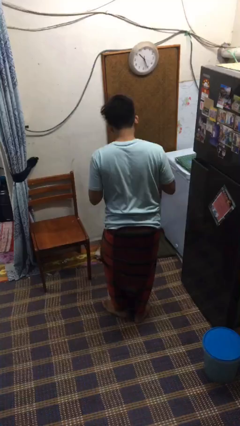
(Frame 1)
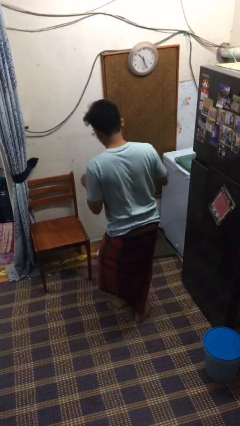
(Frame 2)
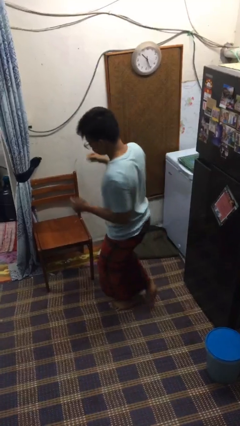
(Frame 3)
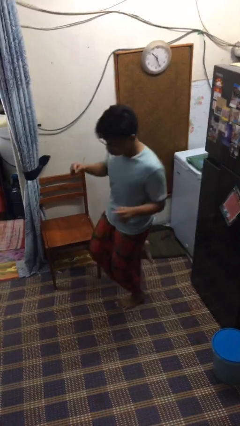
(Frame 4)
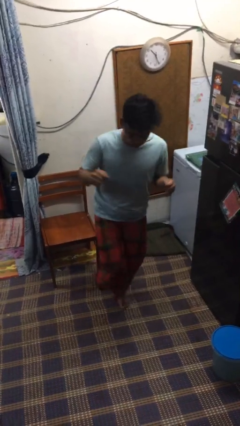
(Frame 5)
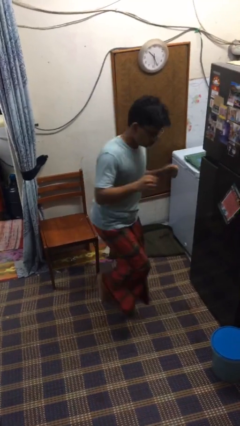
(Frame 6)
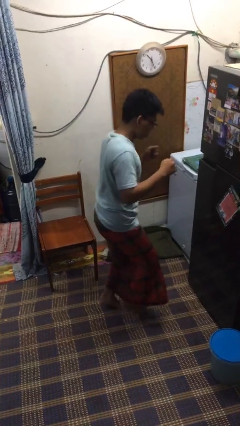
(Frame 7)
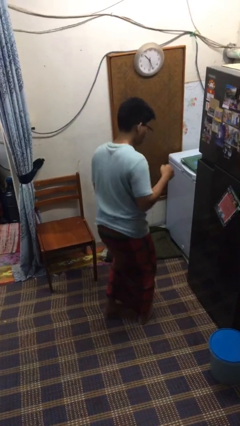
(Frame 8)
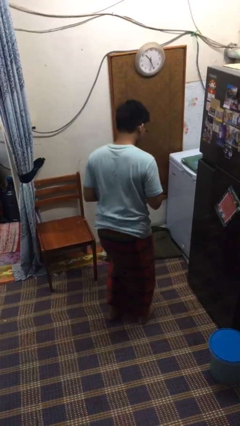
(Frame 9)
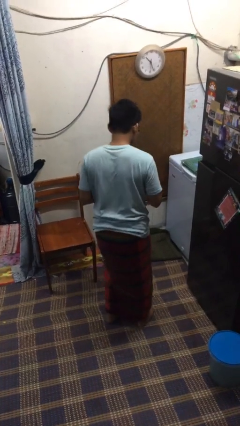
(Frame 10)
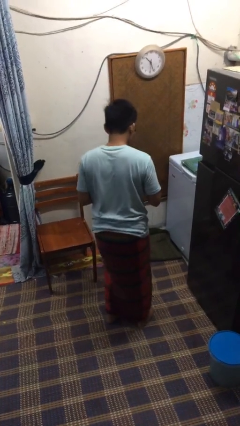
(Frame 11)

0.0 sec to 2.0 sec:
person twirls

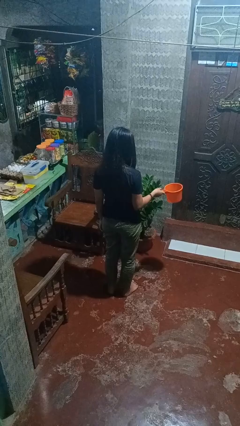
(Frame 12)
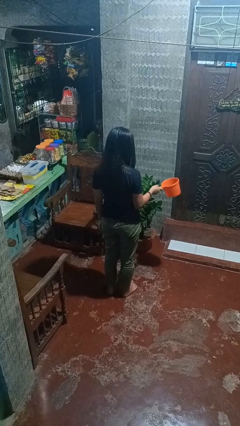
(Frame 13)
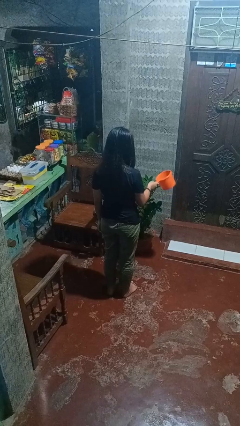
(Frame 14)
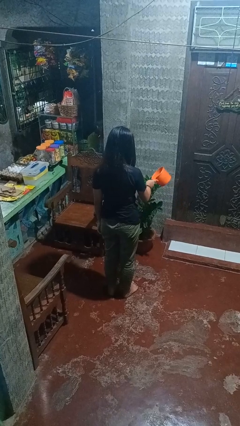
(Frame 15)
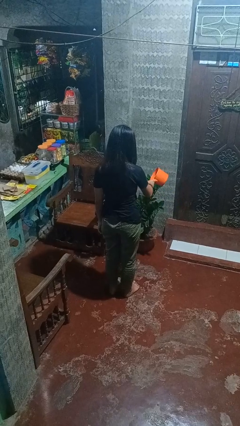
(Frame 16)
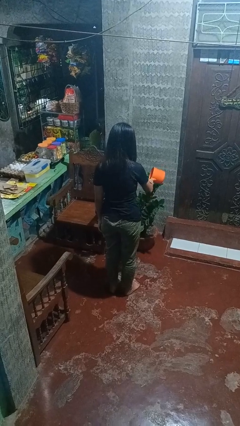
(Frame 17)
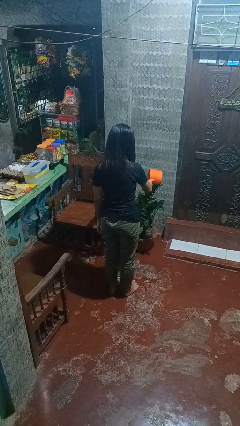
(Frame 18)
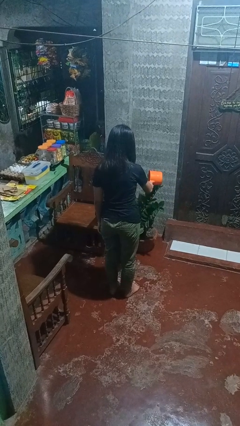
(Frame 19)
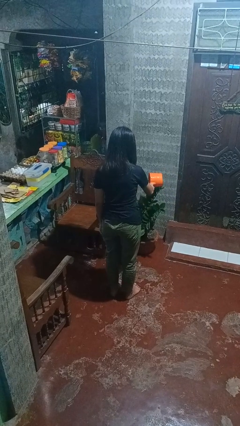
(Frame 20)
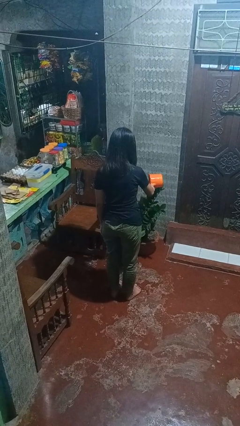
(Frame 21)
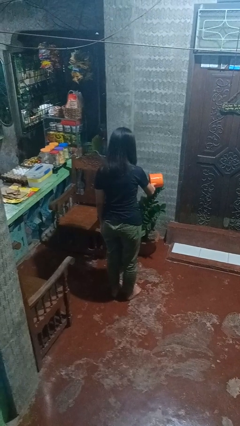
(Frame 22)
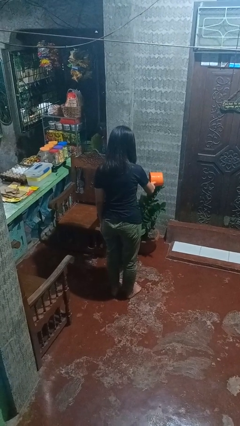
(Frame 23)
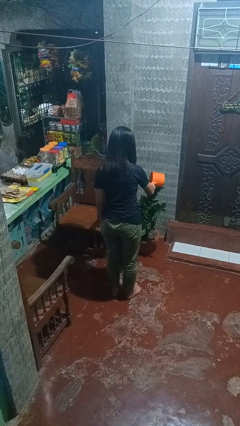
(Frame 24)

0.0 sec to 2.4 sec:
person waters houseplant

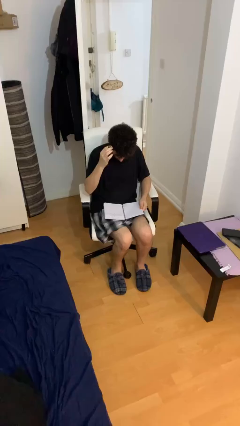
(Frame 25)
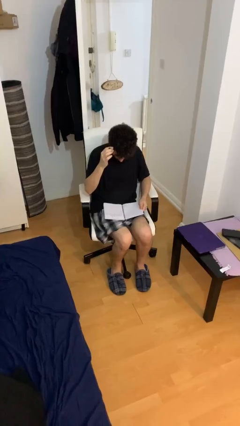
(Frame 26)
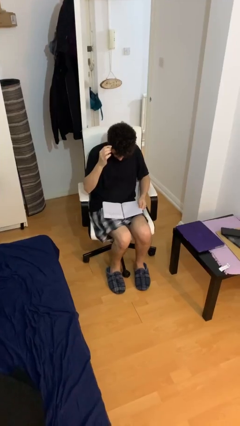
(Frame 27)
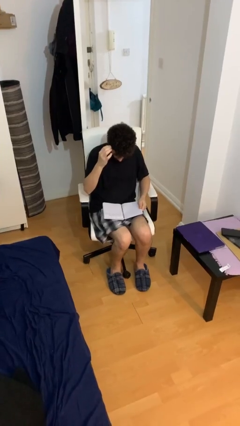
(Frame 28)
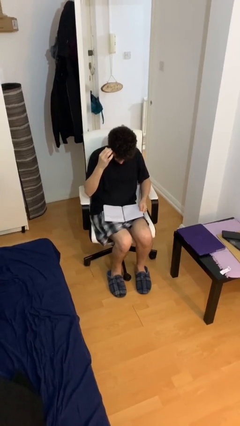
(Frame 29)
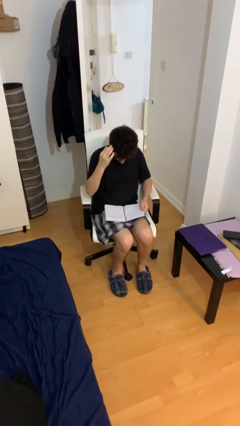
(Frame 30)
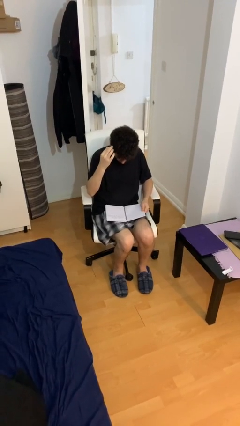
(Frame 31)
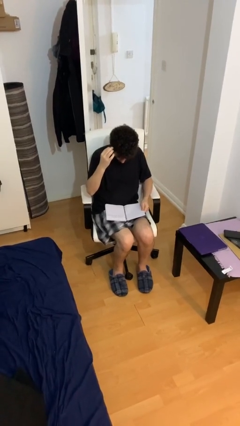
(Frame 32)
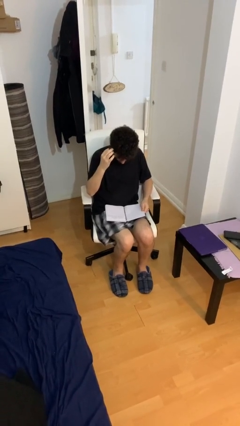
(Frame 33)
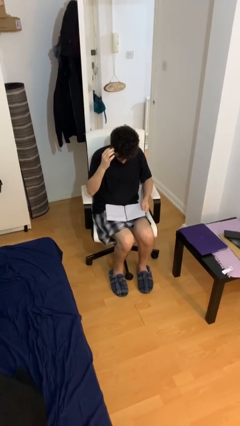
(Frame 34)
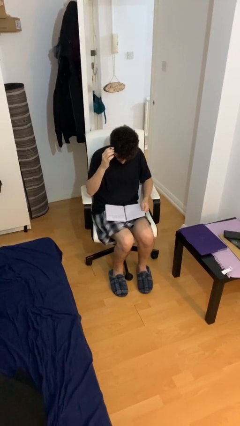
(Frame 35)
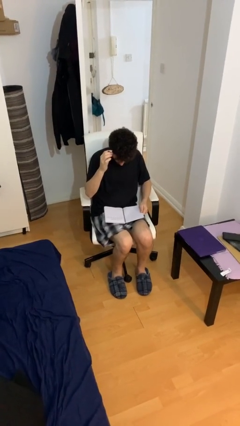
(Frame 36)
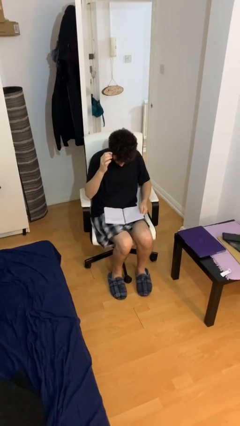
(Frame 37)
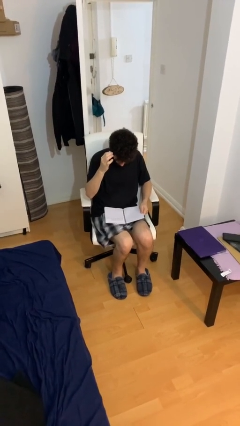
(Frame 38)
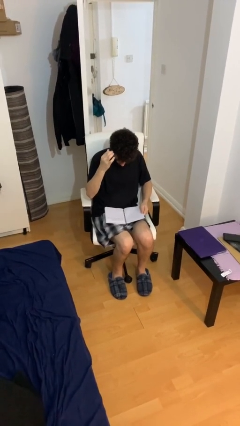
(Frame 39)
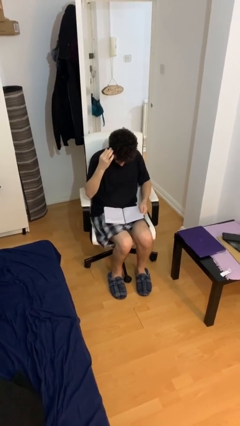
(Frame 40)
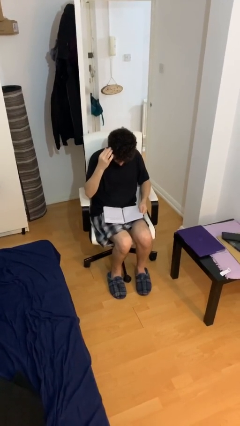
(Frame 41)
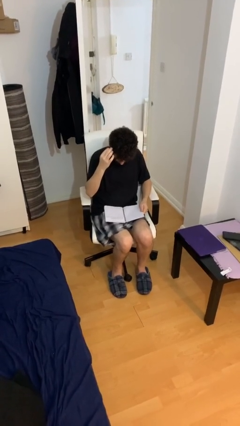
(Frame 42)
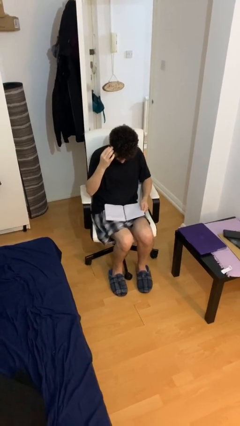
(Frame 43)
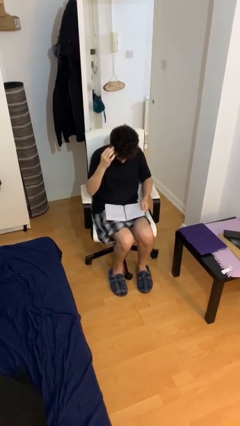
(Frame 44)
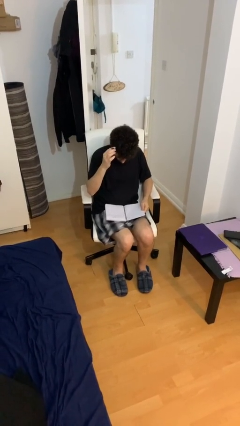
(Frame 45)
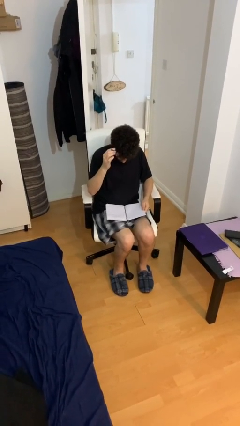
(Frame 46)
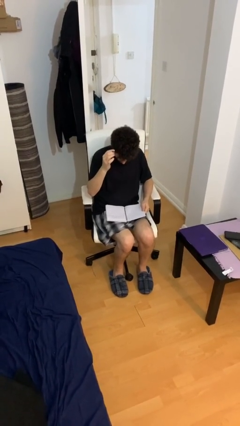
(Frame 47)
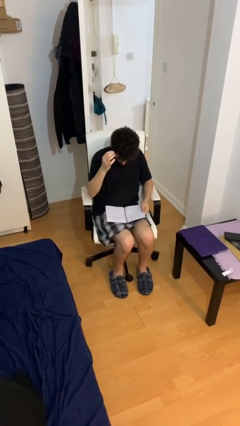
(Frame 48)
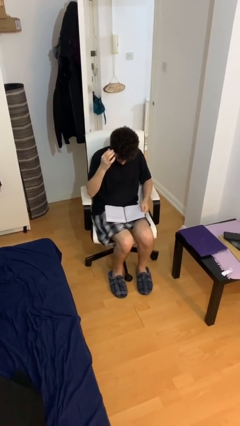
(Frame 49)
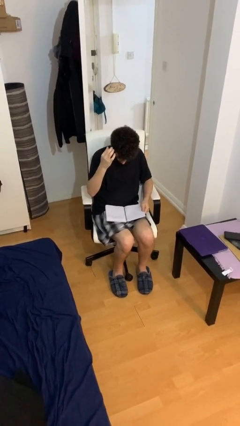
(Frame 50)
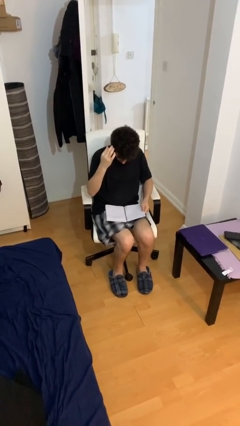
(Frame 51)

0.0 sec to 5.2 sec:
person reads document

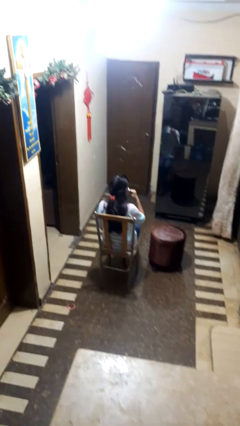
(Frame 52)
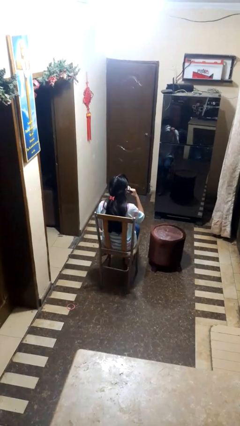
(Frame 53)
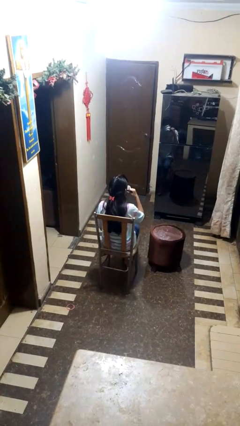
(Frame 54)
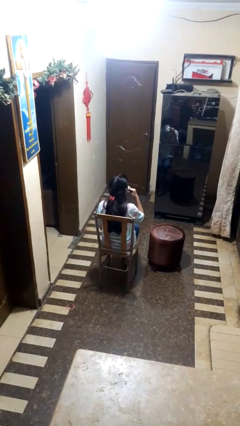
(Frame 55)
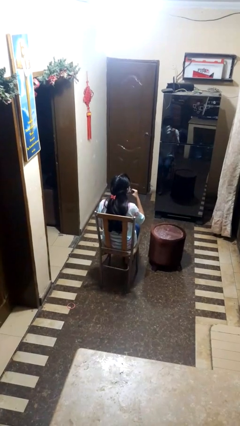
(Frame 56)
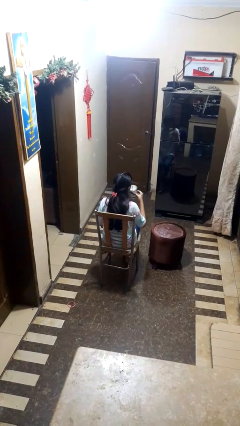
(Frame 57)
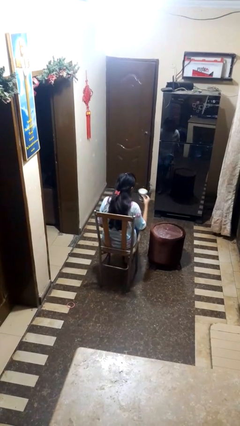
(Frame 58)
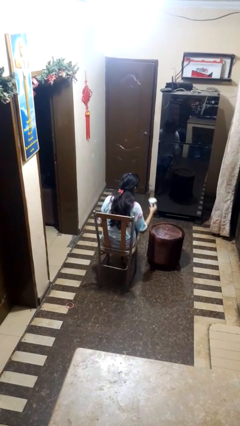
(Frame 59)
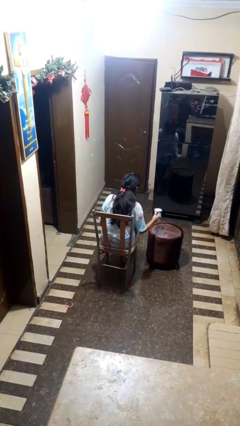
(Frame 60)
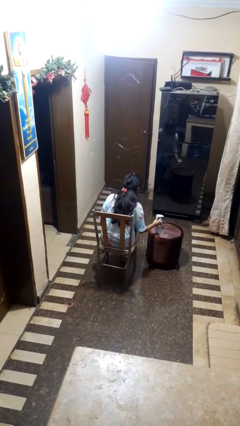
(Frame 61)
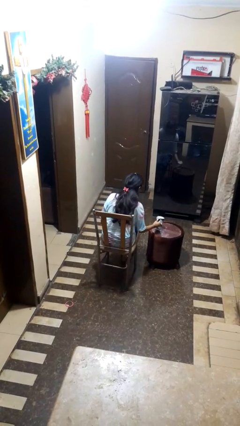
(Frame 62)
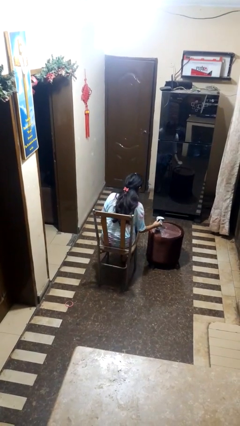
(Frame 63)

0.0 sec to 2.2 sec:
person puts down object on table

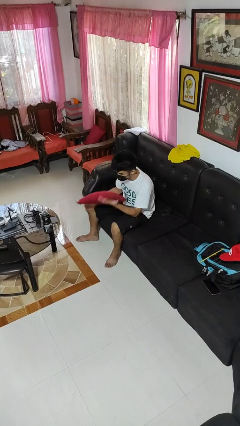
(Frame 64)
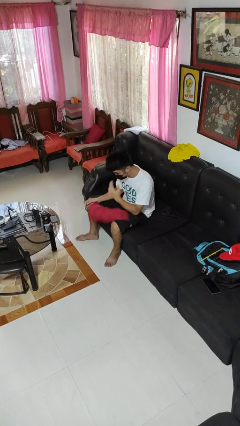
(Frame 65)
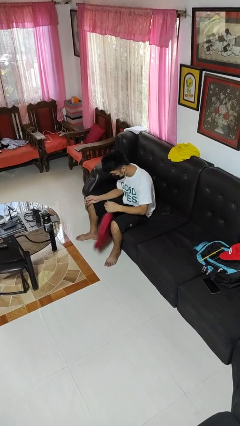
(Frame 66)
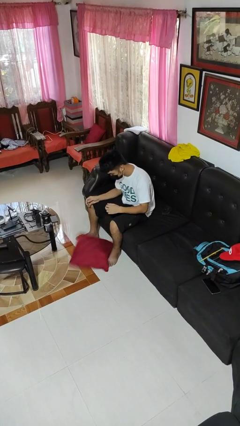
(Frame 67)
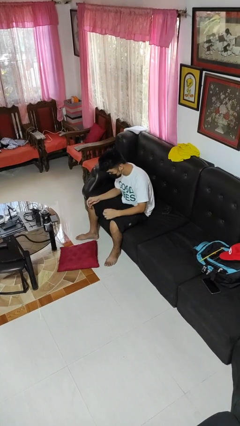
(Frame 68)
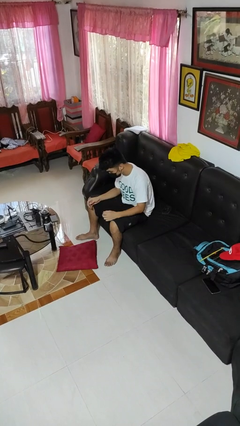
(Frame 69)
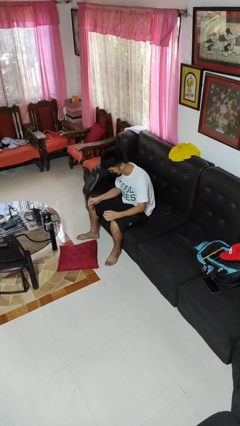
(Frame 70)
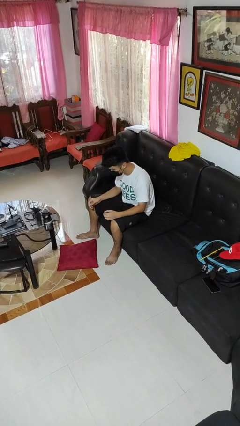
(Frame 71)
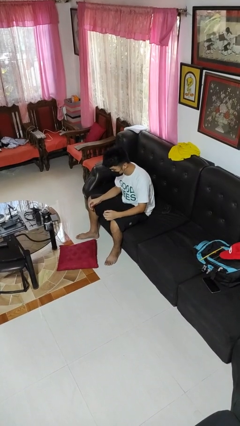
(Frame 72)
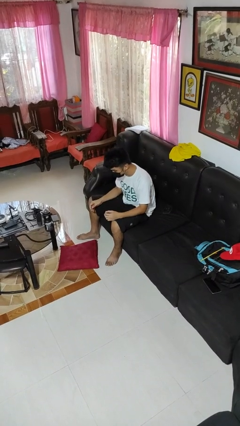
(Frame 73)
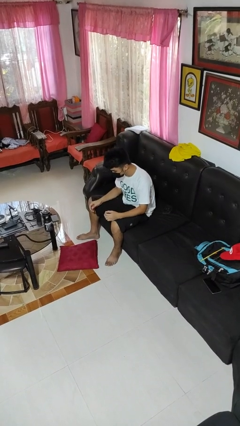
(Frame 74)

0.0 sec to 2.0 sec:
person drops object

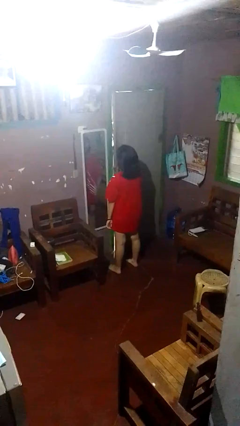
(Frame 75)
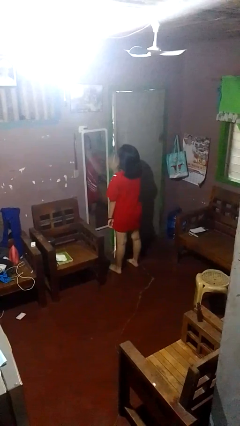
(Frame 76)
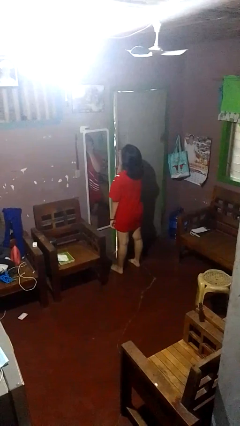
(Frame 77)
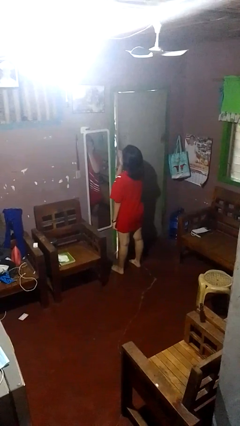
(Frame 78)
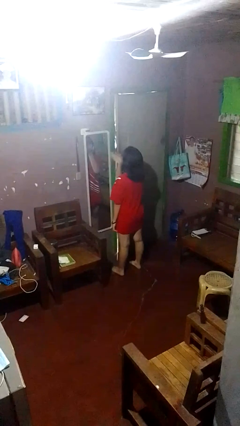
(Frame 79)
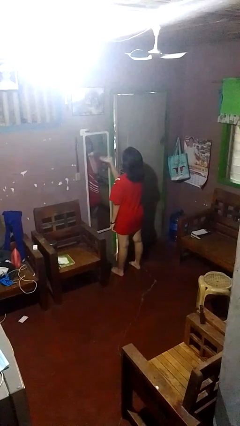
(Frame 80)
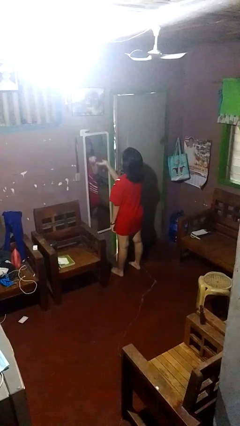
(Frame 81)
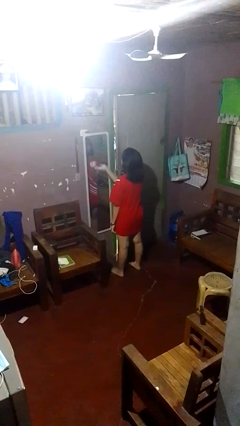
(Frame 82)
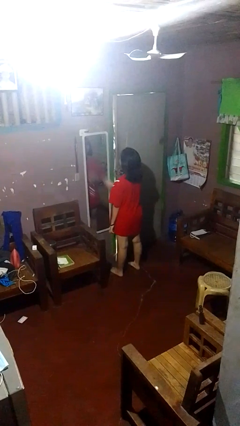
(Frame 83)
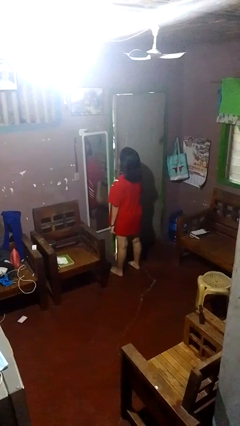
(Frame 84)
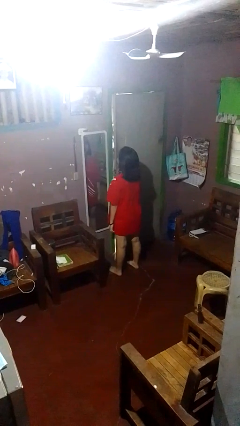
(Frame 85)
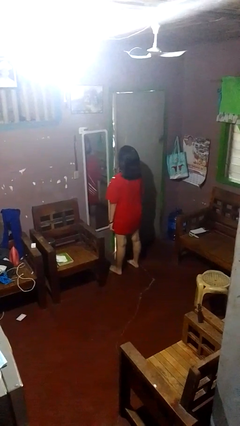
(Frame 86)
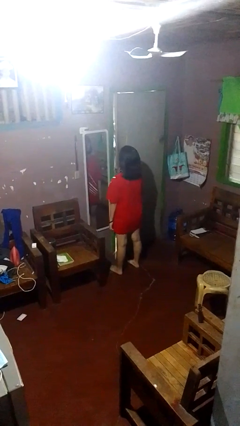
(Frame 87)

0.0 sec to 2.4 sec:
person gestures blow kiss

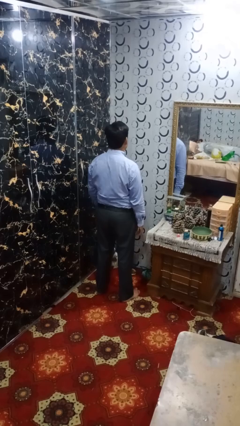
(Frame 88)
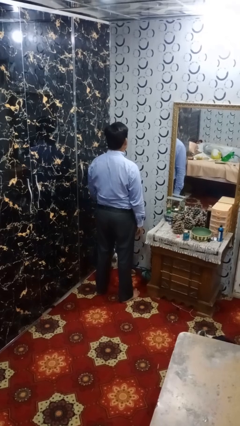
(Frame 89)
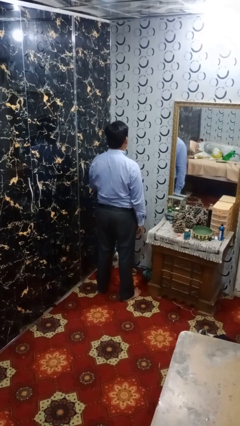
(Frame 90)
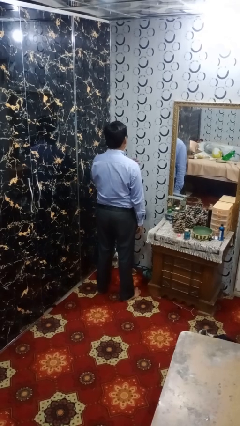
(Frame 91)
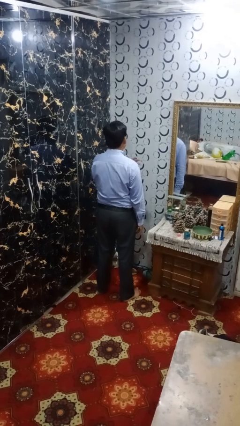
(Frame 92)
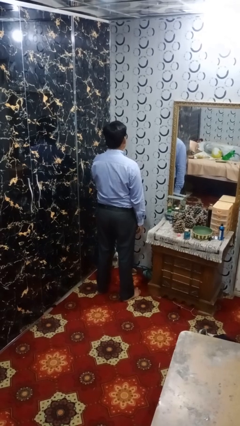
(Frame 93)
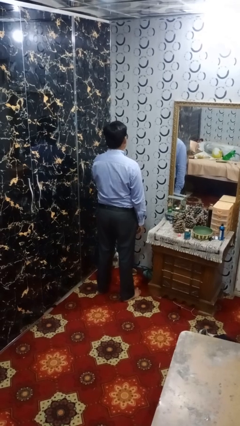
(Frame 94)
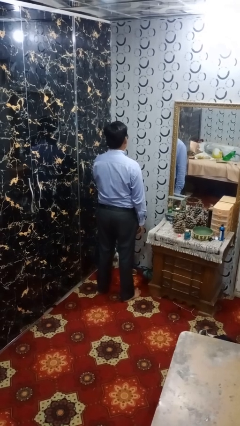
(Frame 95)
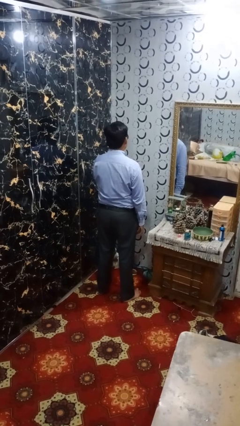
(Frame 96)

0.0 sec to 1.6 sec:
person drums on chest
